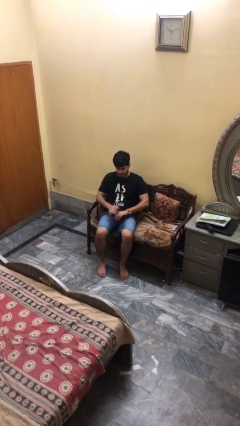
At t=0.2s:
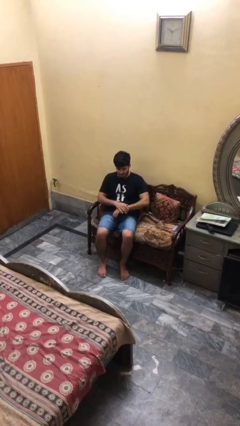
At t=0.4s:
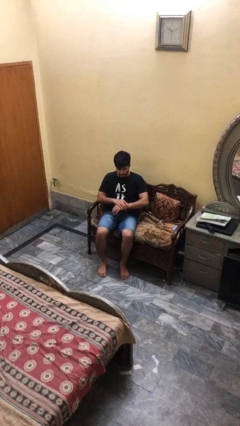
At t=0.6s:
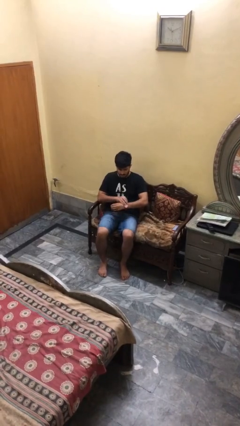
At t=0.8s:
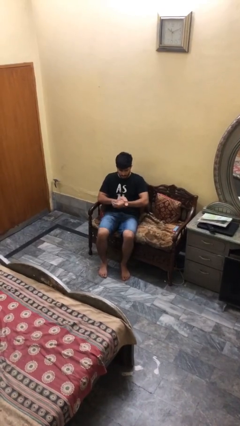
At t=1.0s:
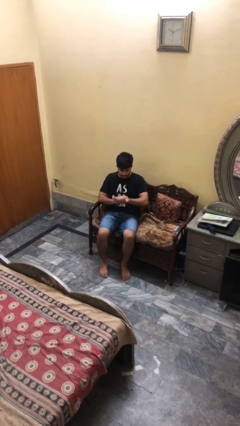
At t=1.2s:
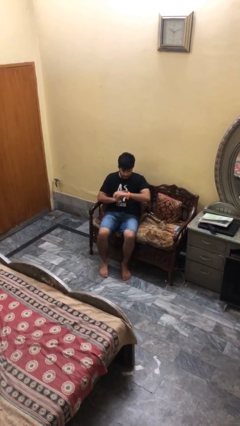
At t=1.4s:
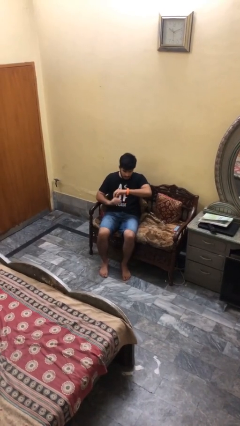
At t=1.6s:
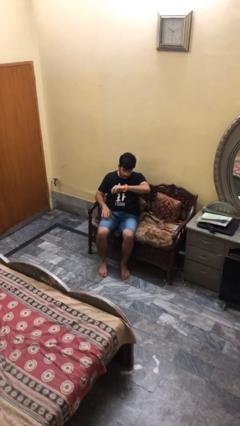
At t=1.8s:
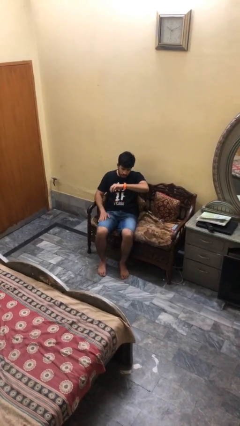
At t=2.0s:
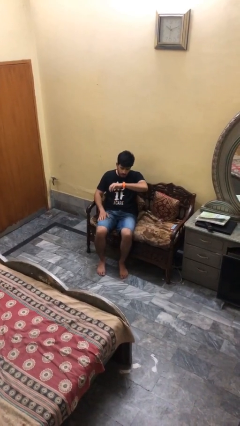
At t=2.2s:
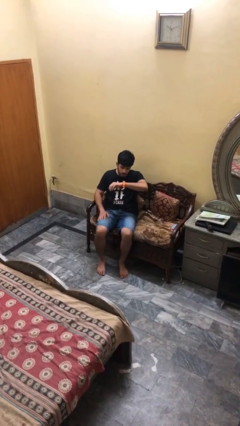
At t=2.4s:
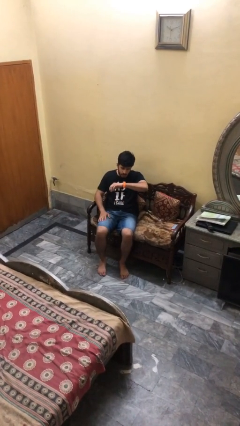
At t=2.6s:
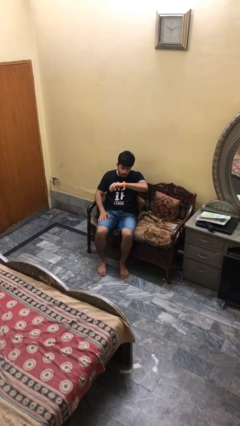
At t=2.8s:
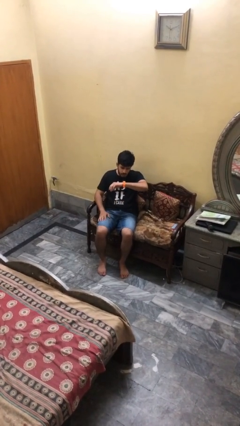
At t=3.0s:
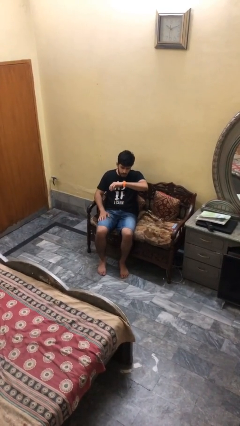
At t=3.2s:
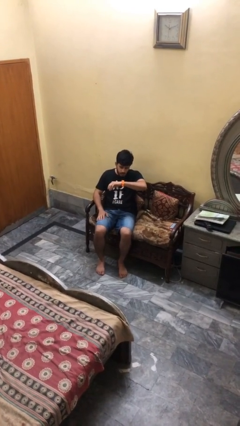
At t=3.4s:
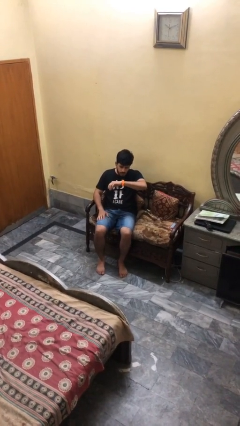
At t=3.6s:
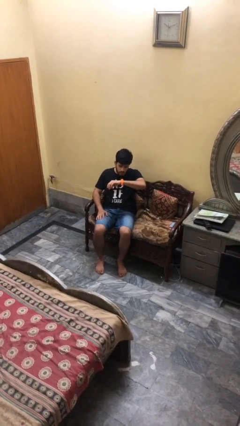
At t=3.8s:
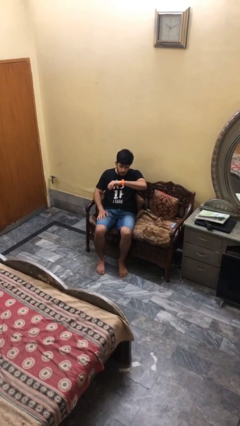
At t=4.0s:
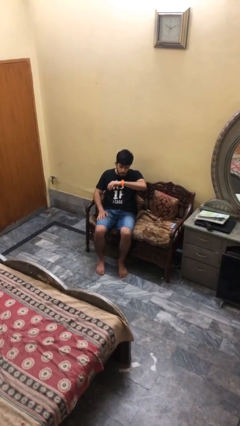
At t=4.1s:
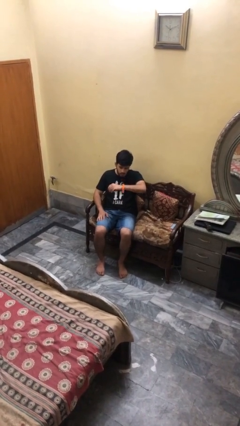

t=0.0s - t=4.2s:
person looks at wristwatch

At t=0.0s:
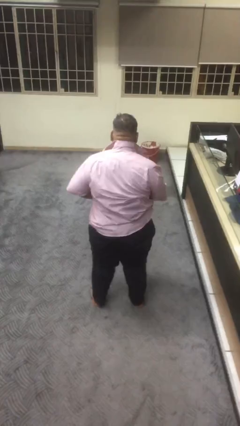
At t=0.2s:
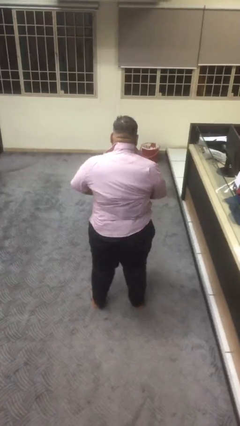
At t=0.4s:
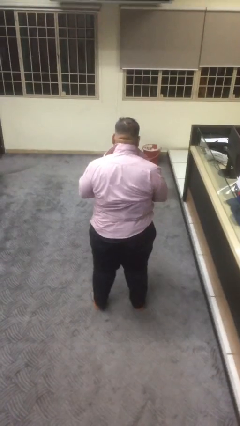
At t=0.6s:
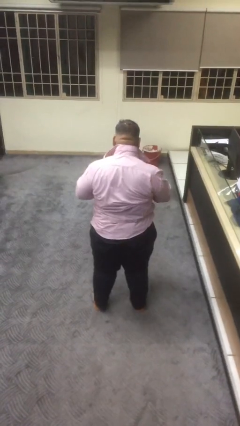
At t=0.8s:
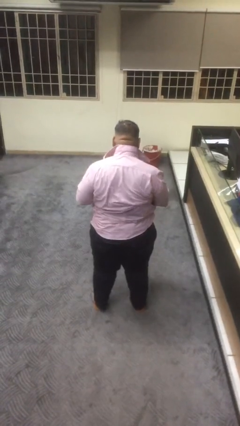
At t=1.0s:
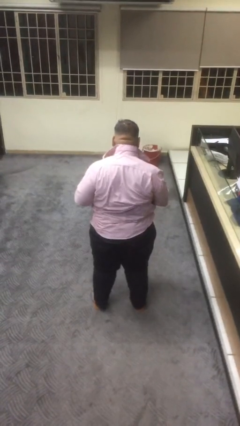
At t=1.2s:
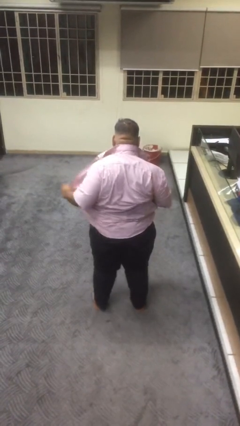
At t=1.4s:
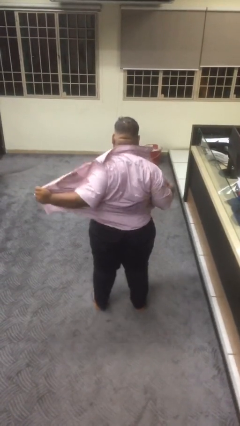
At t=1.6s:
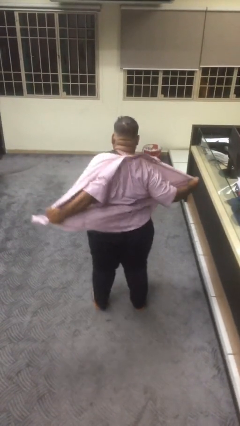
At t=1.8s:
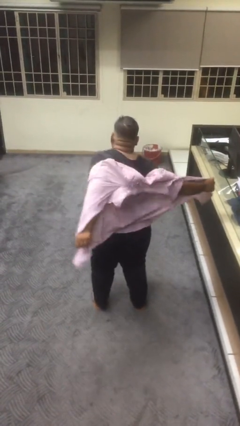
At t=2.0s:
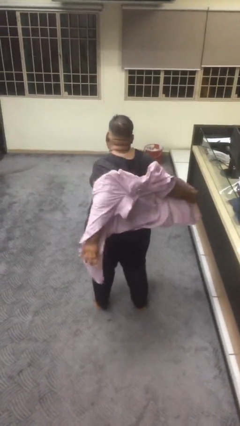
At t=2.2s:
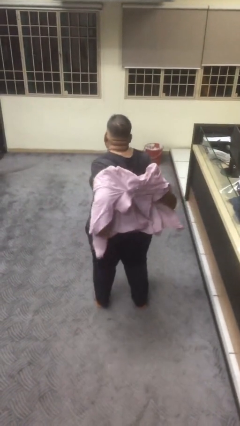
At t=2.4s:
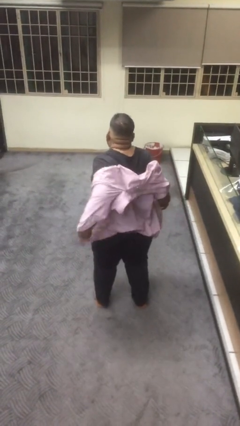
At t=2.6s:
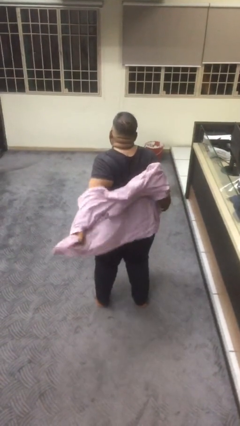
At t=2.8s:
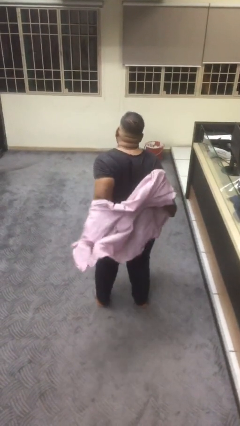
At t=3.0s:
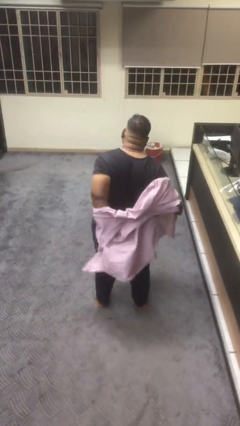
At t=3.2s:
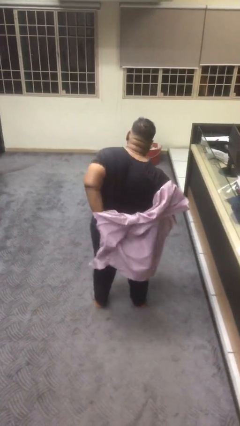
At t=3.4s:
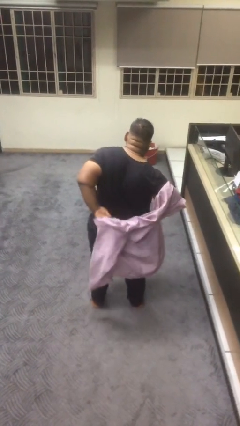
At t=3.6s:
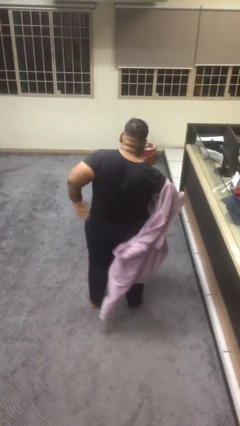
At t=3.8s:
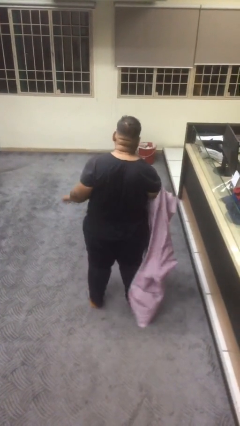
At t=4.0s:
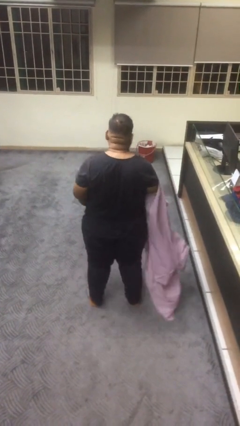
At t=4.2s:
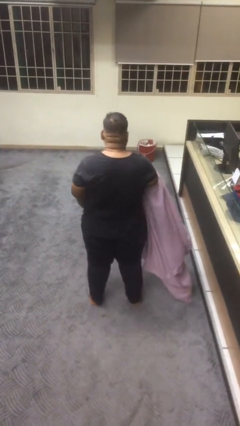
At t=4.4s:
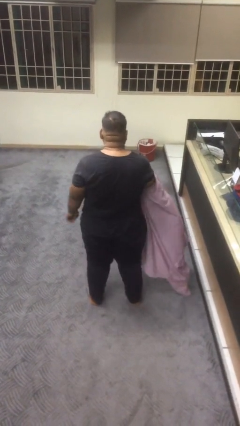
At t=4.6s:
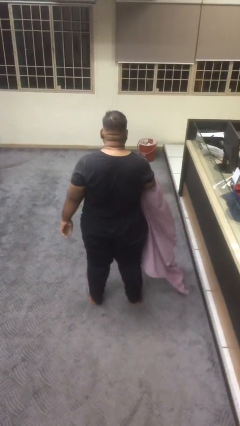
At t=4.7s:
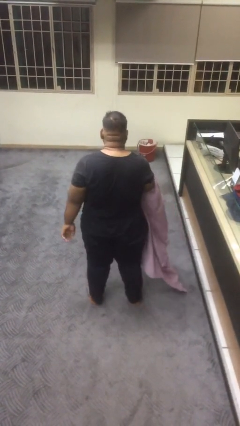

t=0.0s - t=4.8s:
person takes off shirt

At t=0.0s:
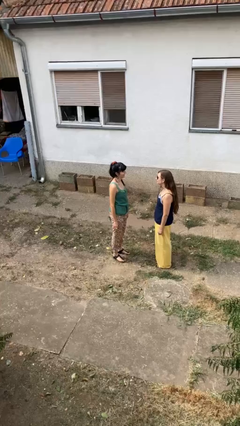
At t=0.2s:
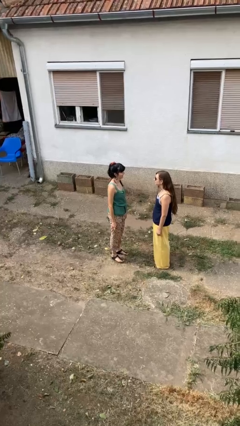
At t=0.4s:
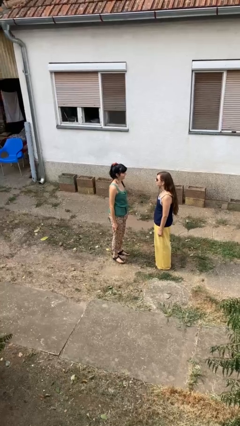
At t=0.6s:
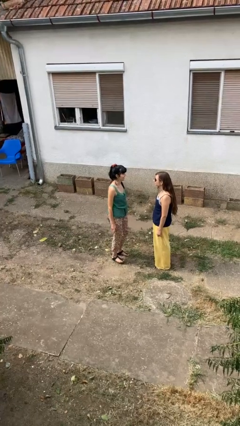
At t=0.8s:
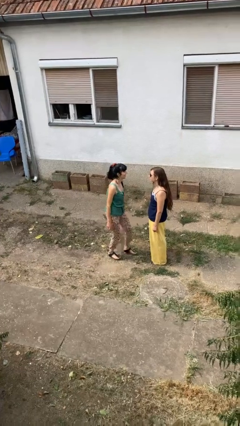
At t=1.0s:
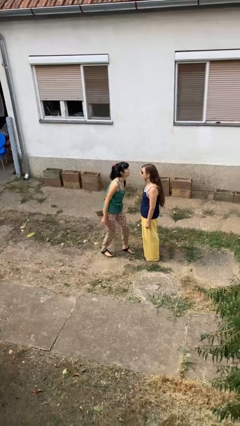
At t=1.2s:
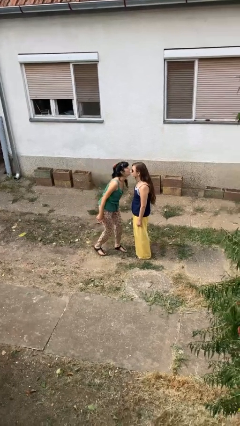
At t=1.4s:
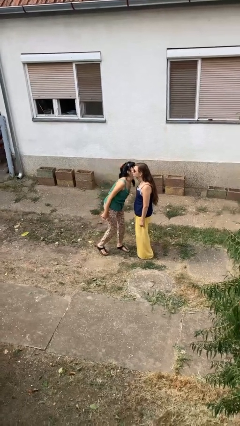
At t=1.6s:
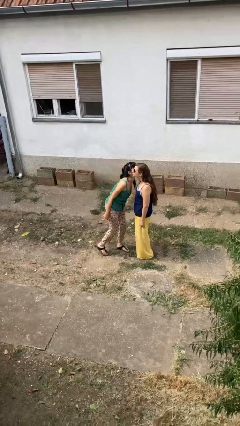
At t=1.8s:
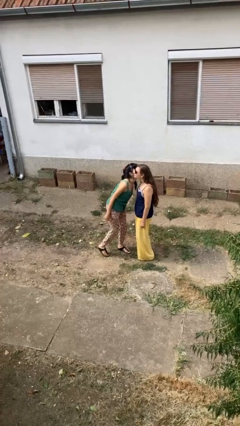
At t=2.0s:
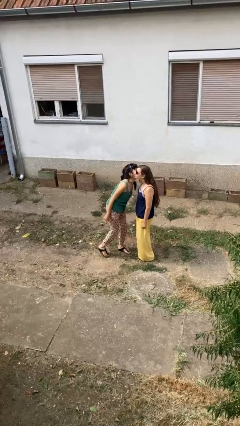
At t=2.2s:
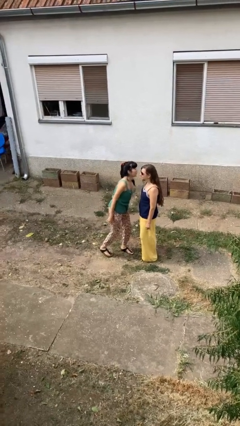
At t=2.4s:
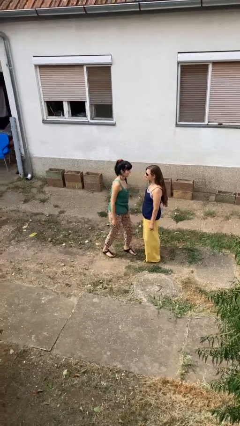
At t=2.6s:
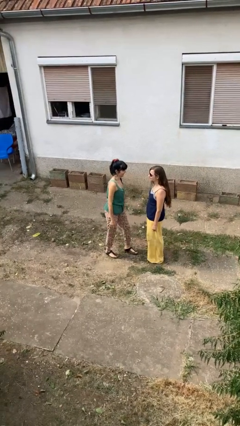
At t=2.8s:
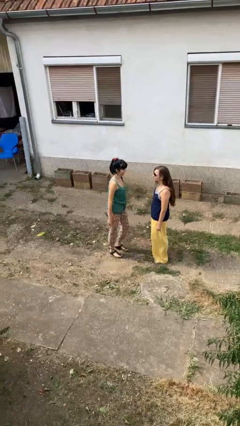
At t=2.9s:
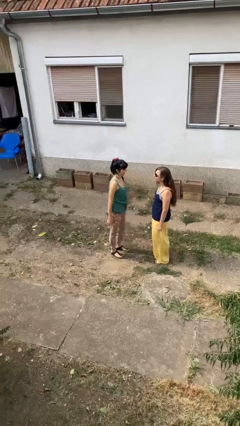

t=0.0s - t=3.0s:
person kisses cheek of person

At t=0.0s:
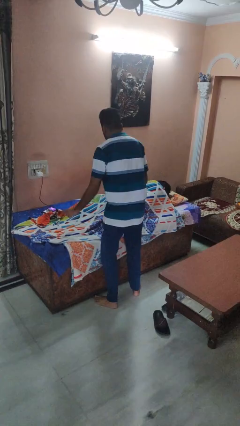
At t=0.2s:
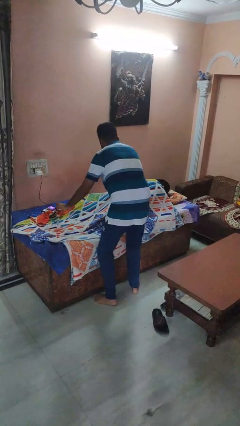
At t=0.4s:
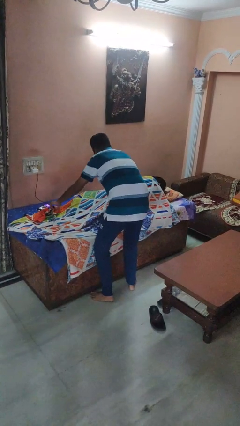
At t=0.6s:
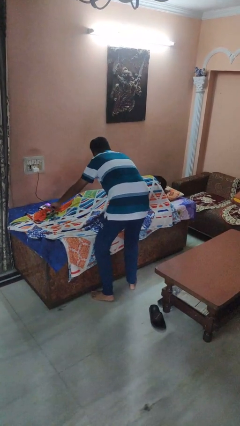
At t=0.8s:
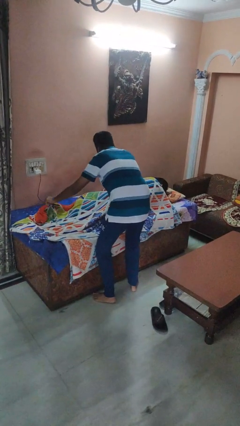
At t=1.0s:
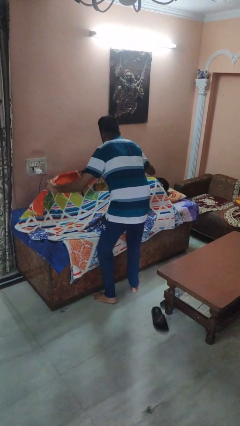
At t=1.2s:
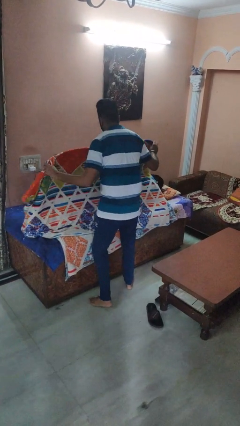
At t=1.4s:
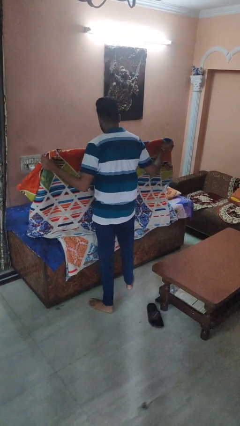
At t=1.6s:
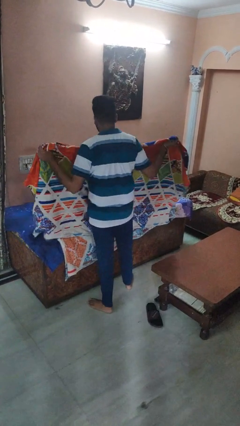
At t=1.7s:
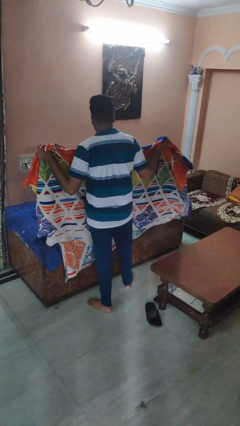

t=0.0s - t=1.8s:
person uncovers friend with blanket

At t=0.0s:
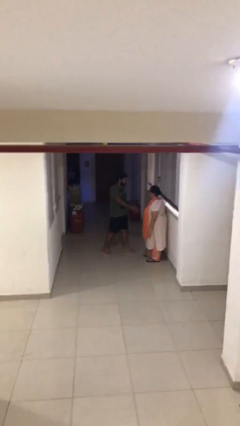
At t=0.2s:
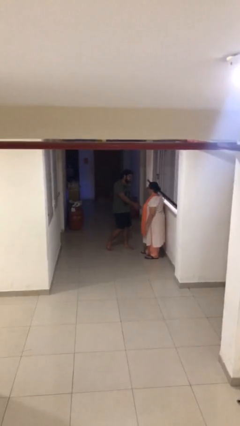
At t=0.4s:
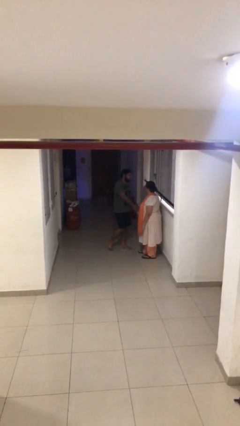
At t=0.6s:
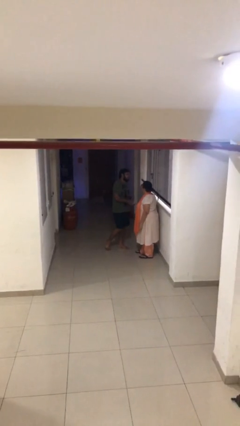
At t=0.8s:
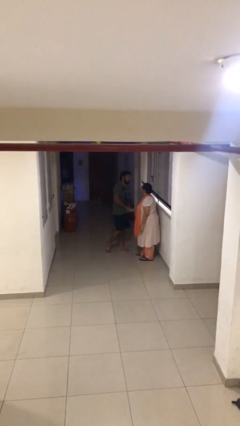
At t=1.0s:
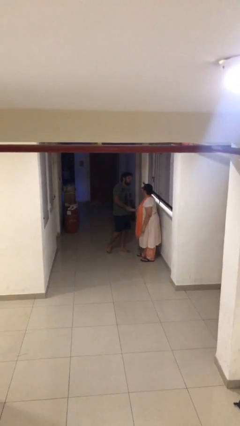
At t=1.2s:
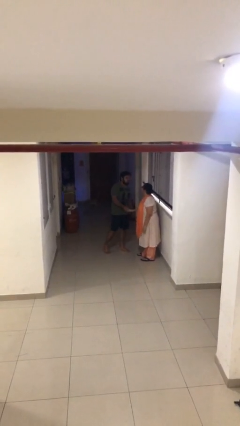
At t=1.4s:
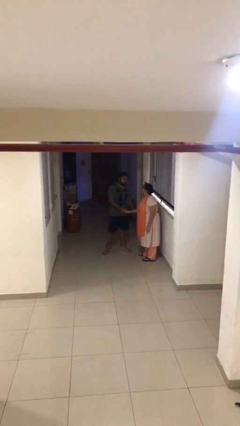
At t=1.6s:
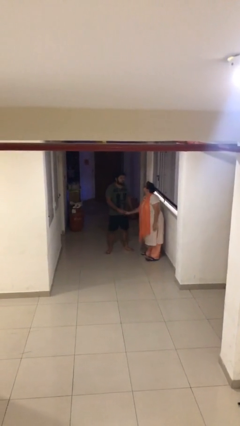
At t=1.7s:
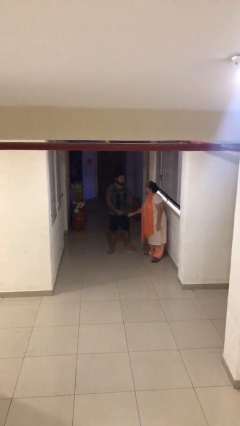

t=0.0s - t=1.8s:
person shakes hand

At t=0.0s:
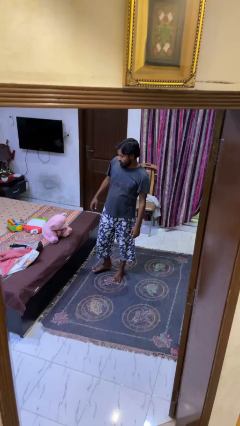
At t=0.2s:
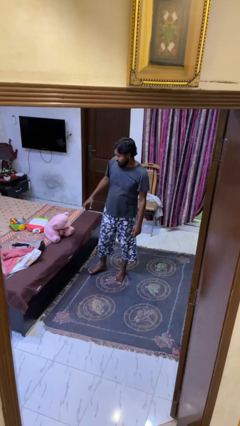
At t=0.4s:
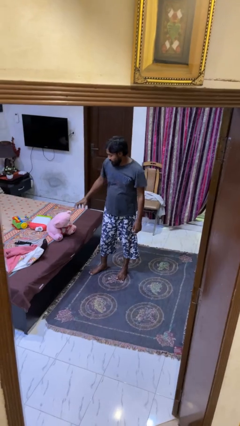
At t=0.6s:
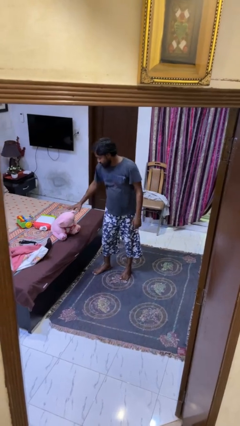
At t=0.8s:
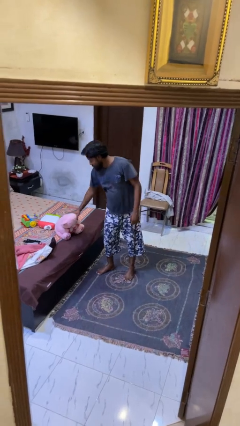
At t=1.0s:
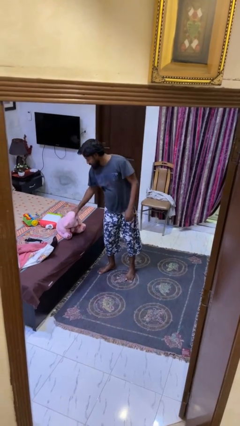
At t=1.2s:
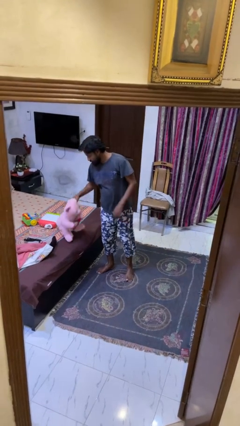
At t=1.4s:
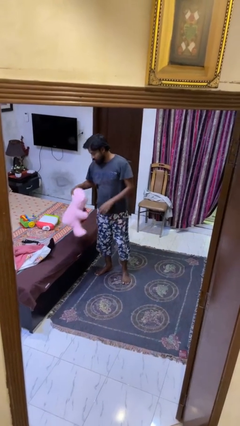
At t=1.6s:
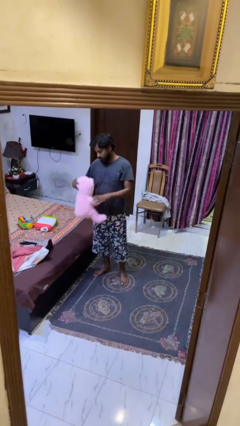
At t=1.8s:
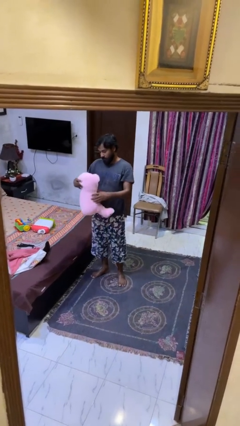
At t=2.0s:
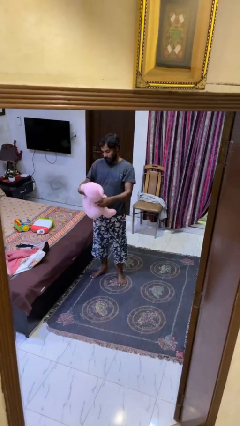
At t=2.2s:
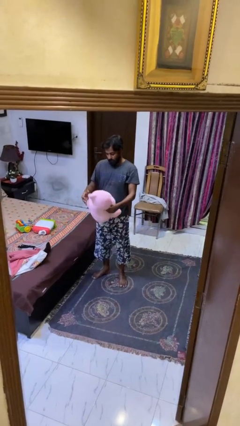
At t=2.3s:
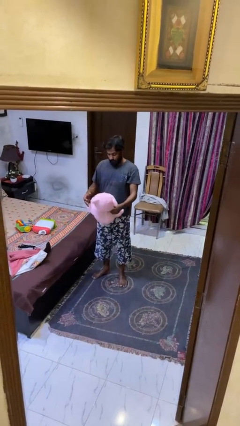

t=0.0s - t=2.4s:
person picks up object from bed
